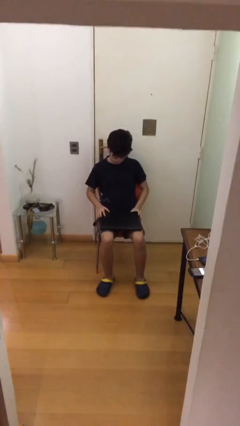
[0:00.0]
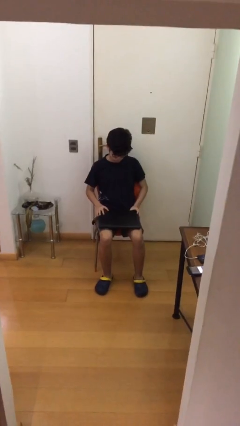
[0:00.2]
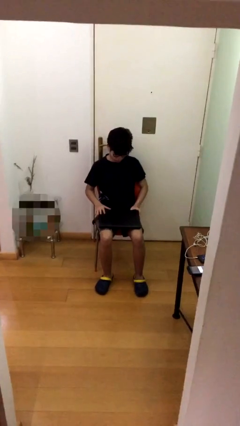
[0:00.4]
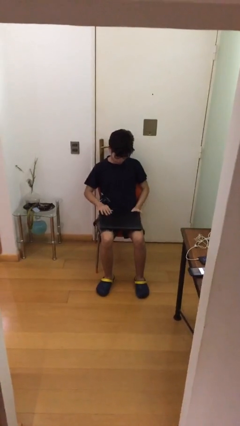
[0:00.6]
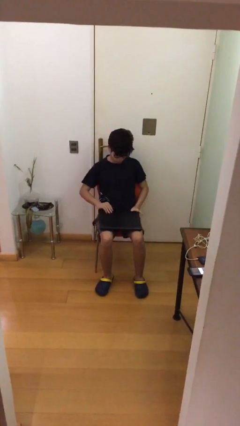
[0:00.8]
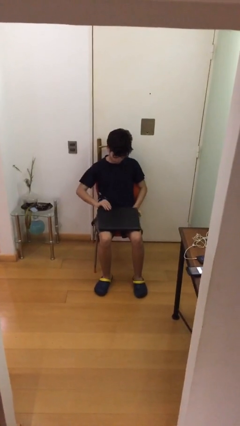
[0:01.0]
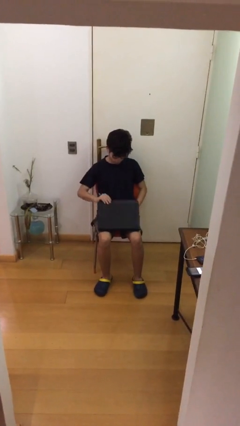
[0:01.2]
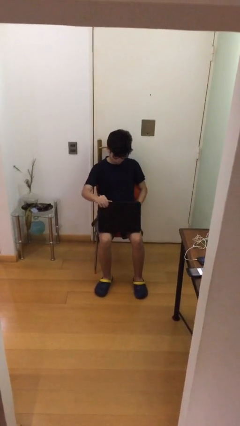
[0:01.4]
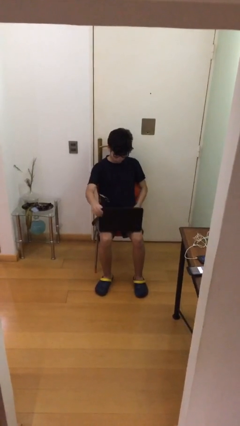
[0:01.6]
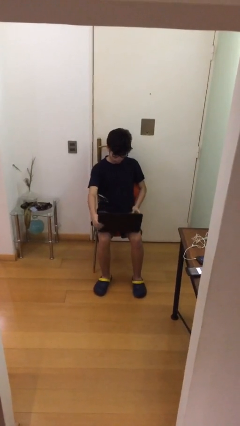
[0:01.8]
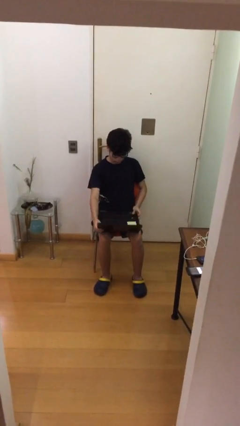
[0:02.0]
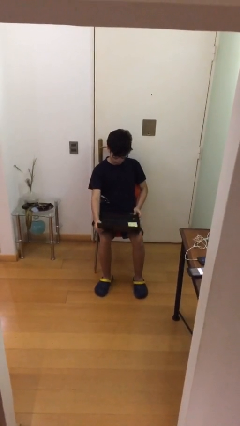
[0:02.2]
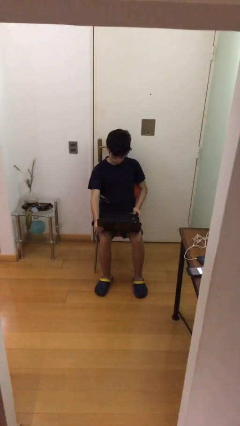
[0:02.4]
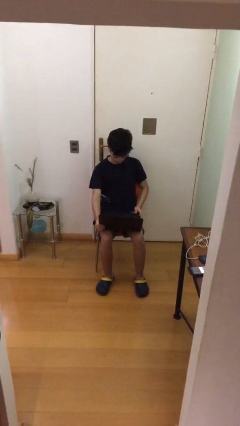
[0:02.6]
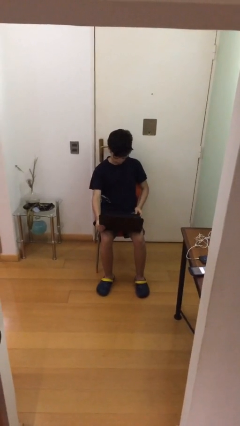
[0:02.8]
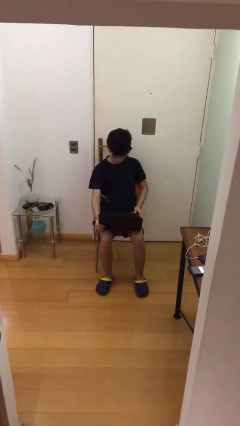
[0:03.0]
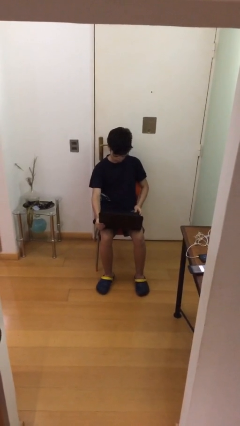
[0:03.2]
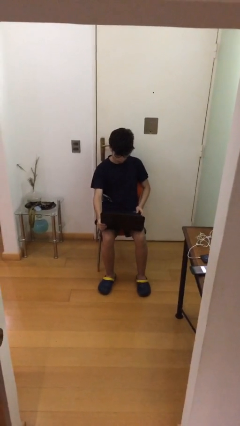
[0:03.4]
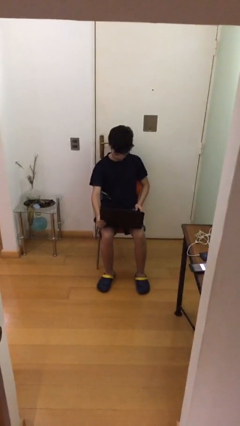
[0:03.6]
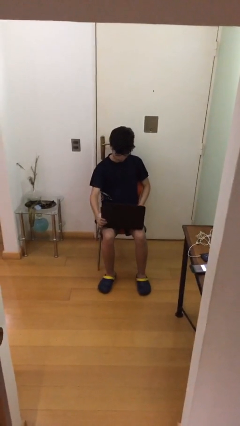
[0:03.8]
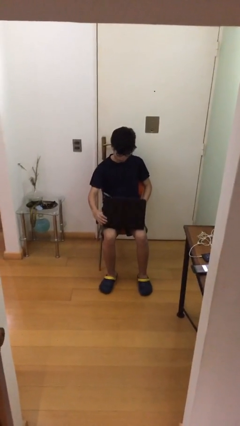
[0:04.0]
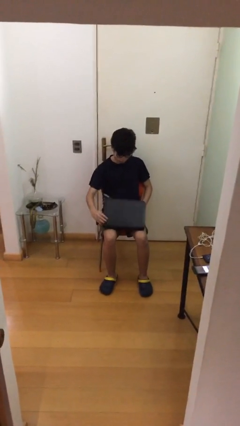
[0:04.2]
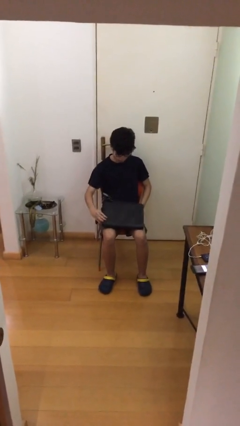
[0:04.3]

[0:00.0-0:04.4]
person interacts with laptop

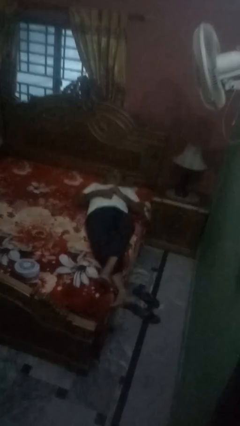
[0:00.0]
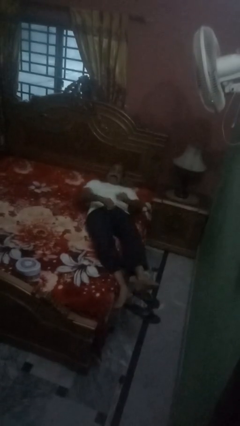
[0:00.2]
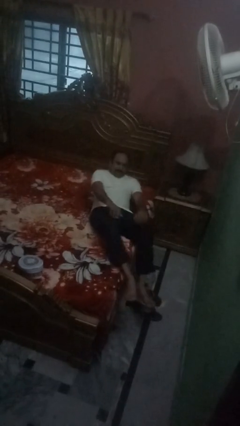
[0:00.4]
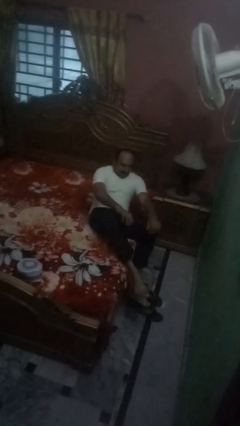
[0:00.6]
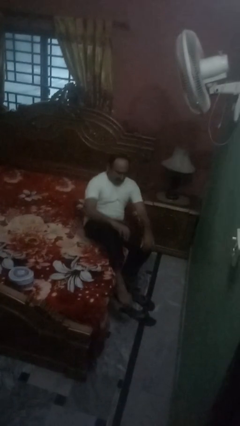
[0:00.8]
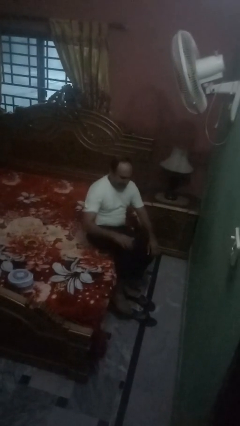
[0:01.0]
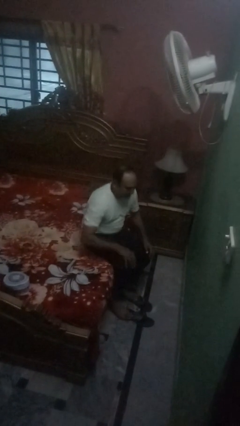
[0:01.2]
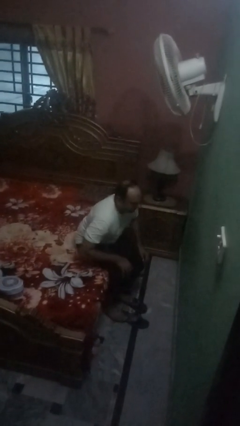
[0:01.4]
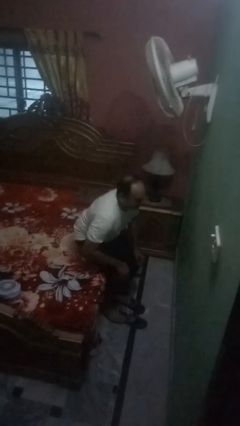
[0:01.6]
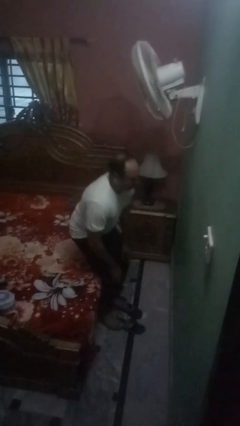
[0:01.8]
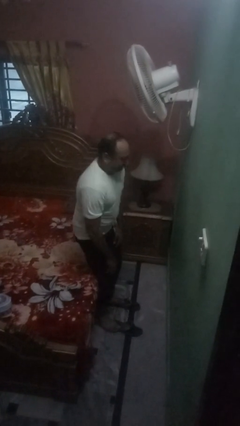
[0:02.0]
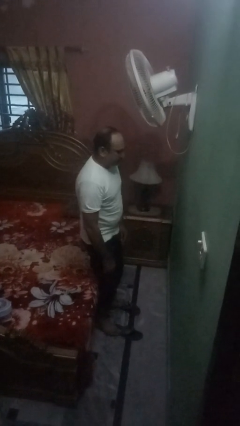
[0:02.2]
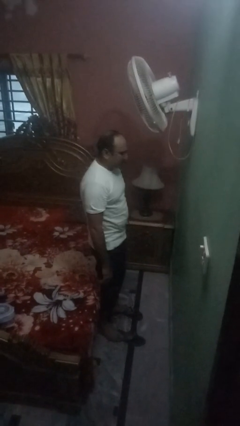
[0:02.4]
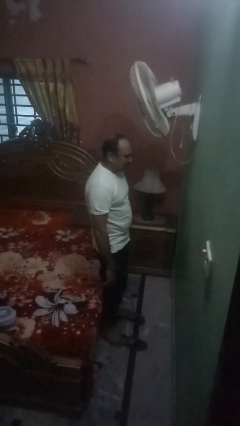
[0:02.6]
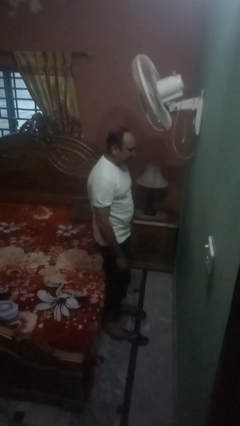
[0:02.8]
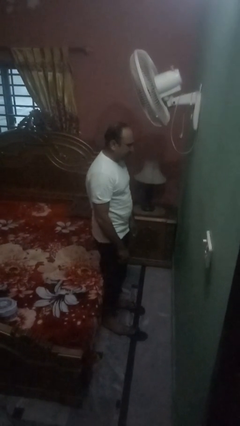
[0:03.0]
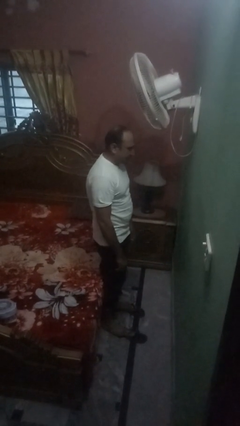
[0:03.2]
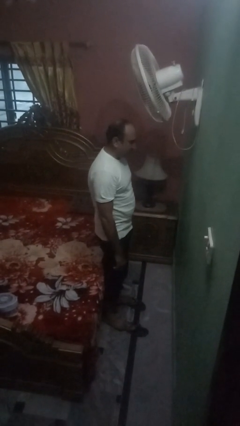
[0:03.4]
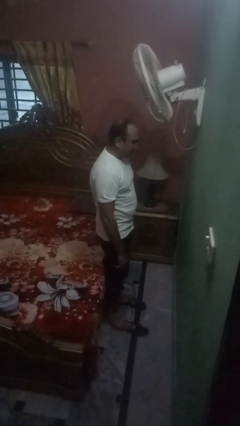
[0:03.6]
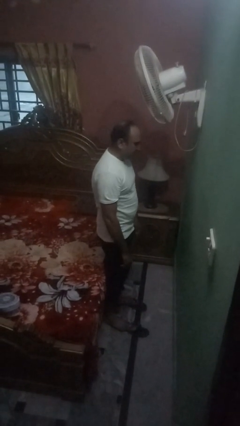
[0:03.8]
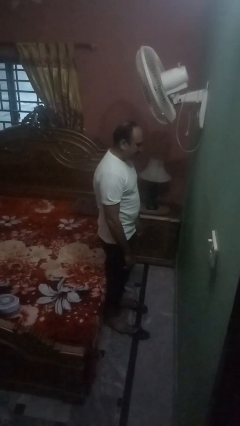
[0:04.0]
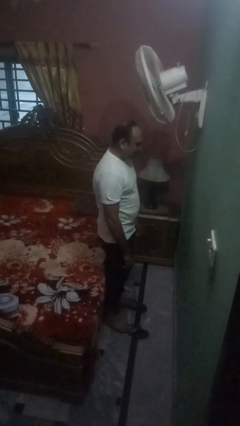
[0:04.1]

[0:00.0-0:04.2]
person stands up

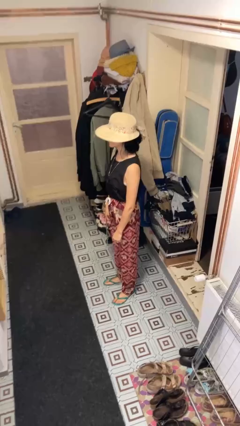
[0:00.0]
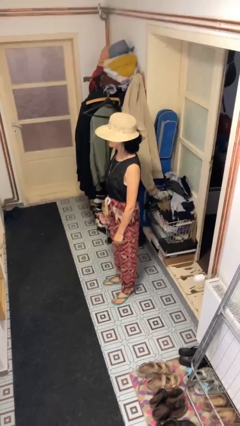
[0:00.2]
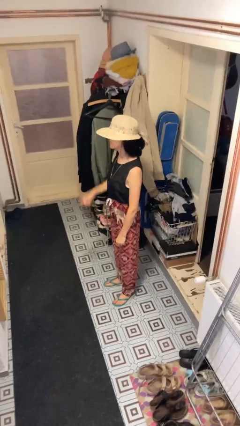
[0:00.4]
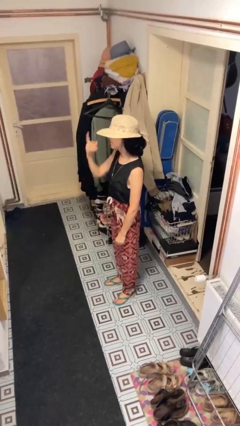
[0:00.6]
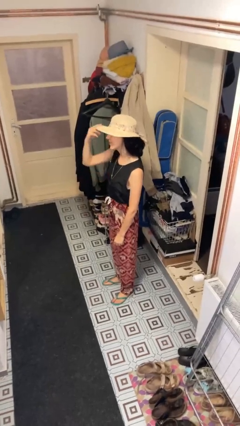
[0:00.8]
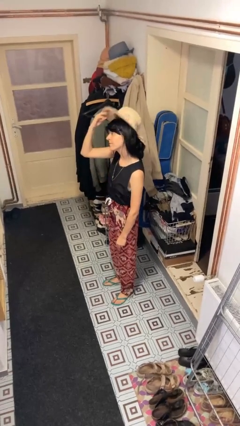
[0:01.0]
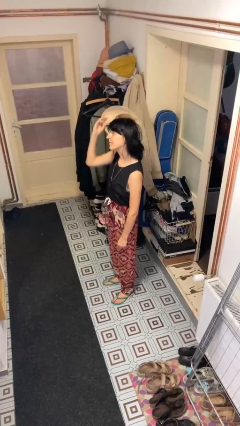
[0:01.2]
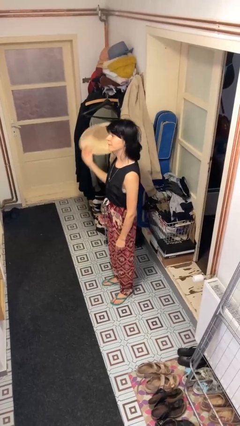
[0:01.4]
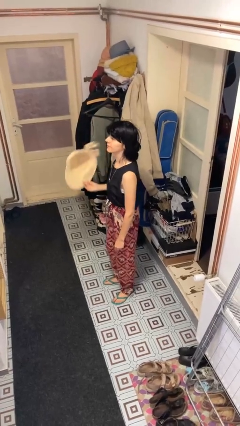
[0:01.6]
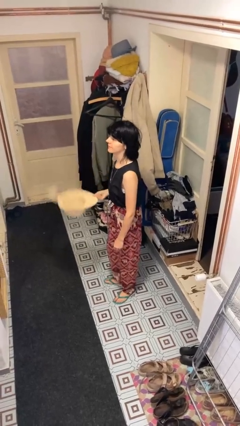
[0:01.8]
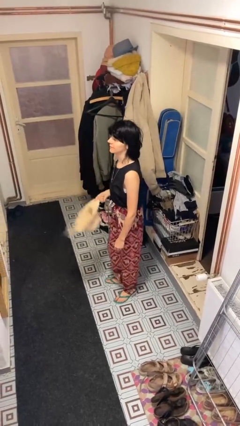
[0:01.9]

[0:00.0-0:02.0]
person takes off hat

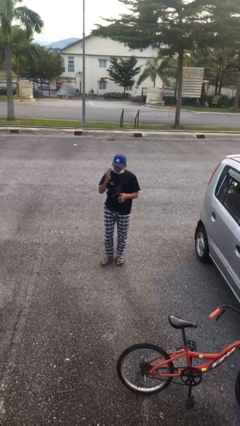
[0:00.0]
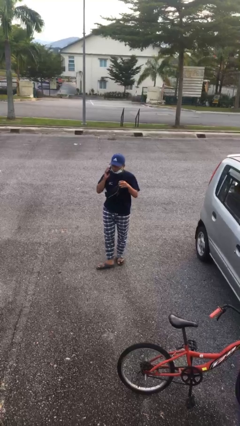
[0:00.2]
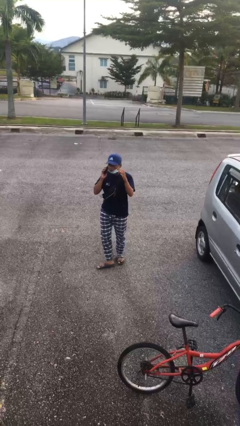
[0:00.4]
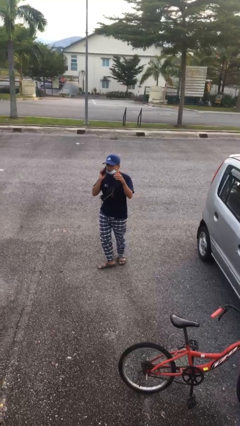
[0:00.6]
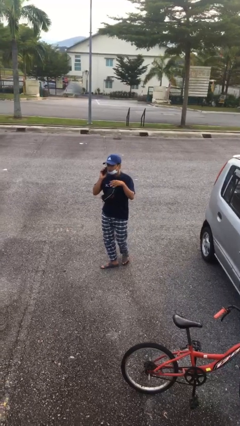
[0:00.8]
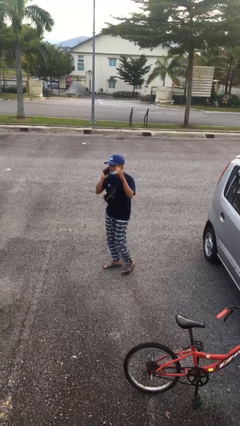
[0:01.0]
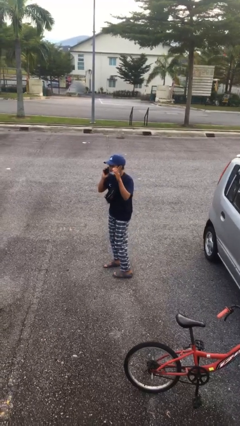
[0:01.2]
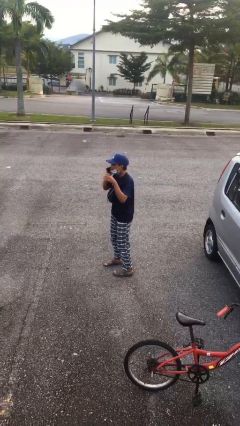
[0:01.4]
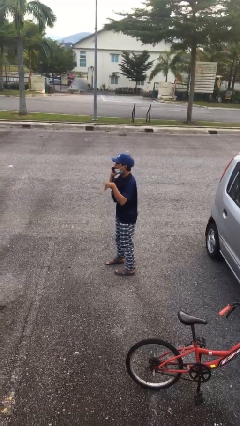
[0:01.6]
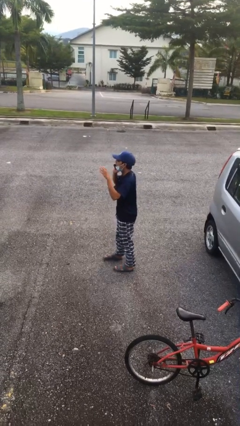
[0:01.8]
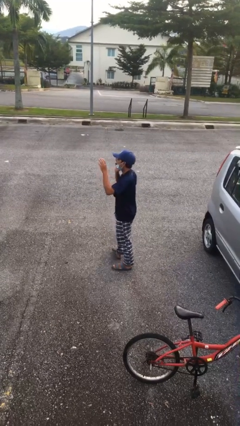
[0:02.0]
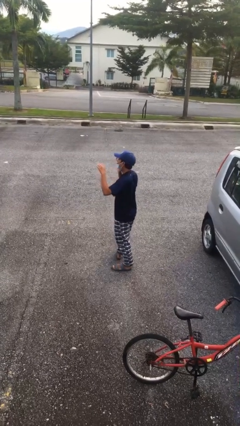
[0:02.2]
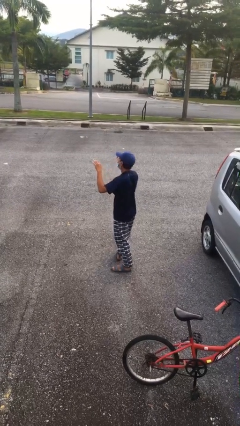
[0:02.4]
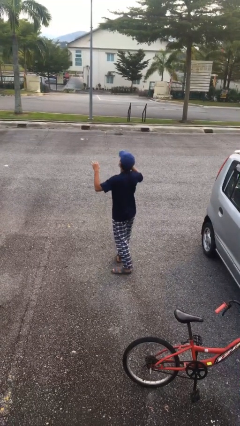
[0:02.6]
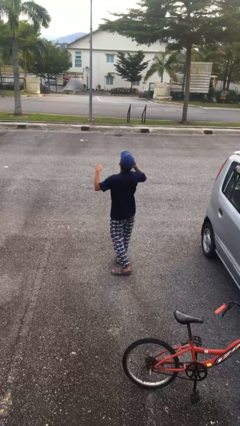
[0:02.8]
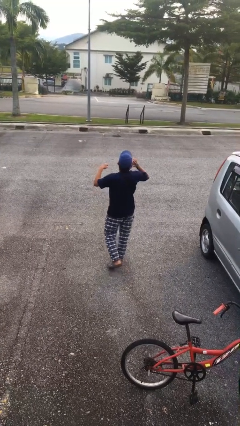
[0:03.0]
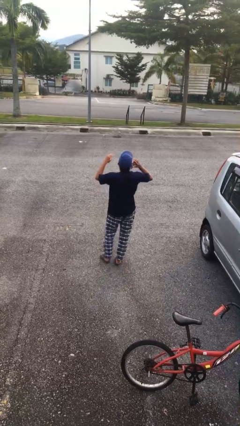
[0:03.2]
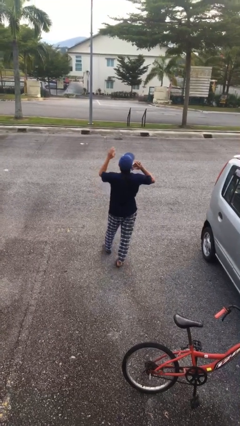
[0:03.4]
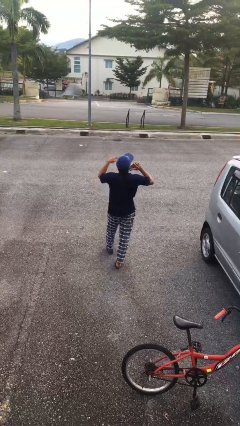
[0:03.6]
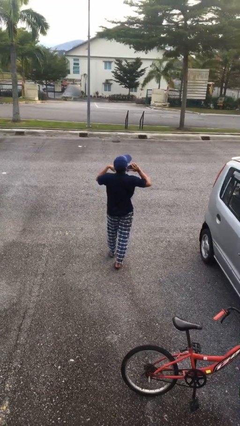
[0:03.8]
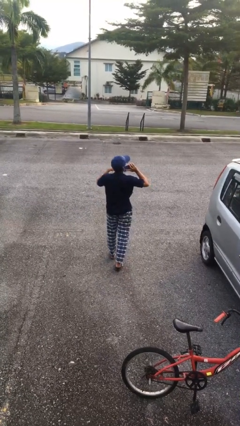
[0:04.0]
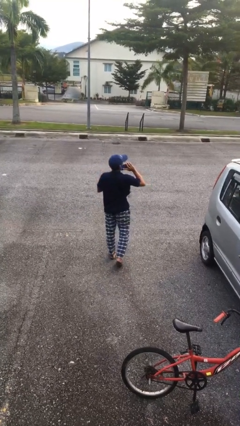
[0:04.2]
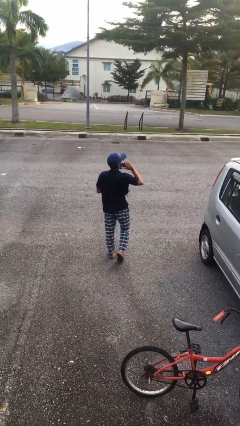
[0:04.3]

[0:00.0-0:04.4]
person talks on phone

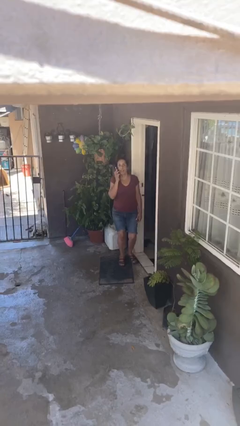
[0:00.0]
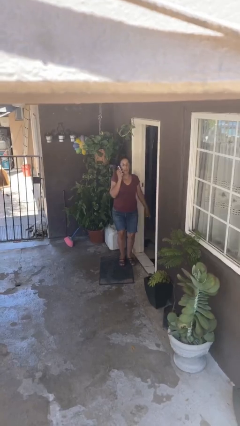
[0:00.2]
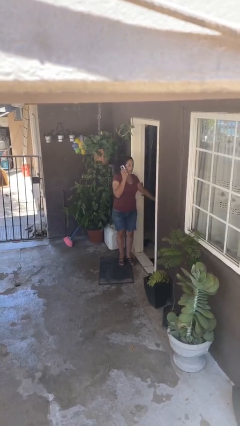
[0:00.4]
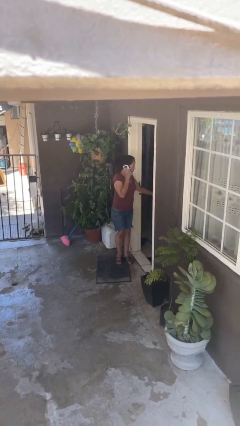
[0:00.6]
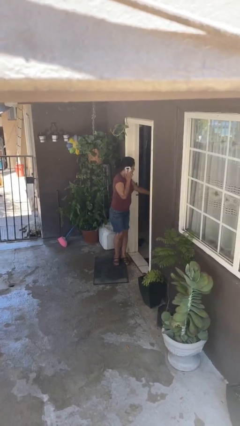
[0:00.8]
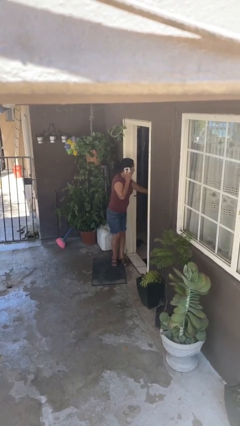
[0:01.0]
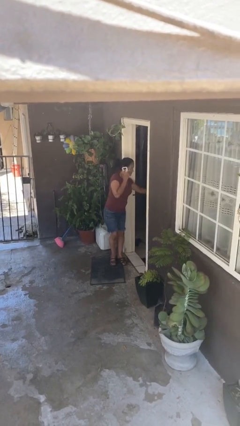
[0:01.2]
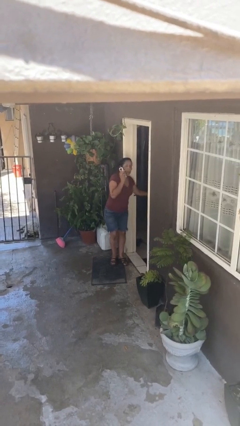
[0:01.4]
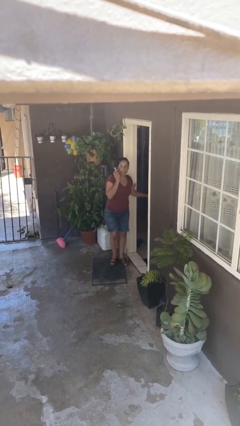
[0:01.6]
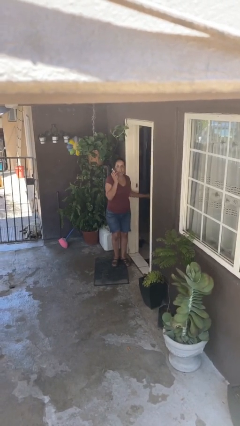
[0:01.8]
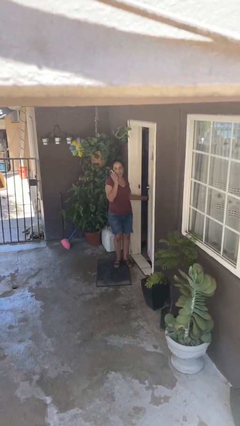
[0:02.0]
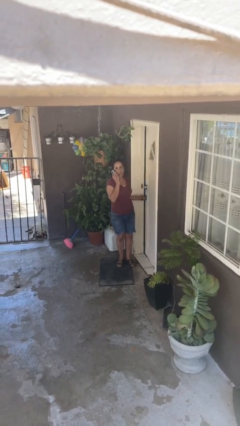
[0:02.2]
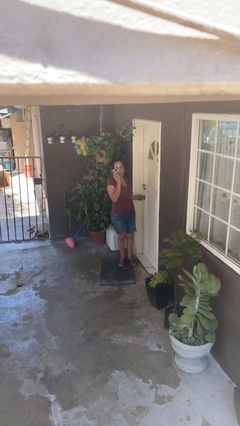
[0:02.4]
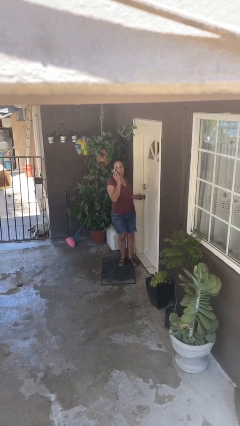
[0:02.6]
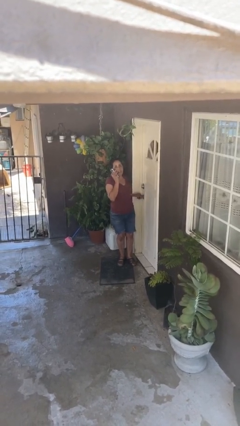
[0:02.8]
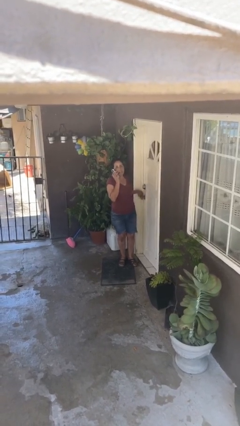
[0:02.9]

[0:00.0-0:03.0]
person closes facility door
